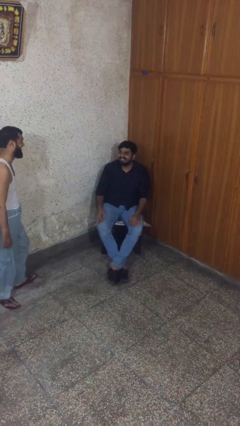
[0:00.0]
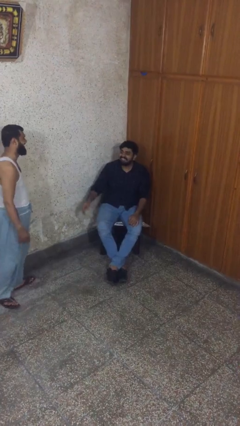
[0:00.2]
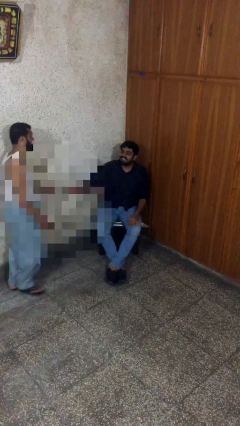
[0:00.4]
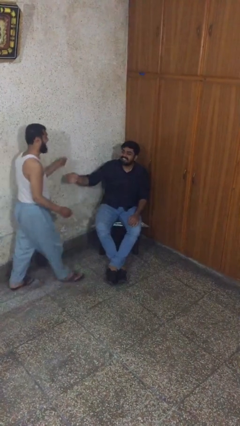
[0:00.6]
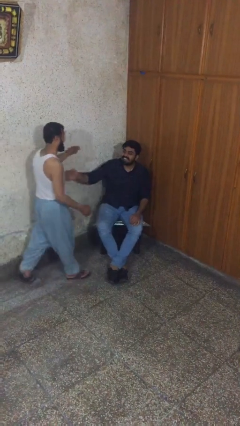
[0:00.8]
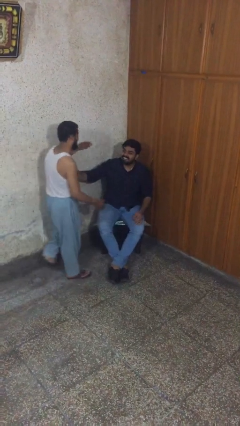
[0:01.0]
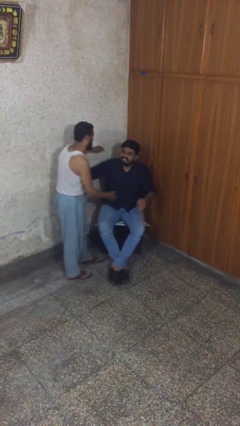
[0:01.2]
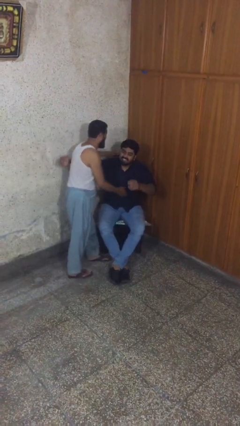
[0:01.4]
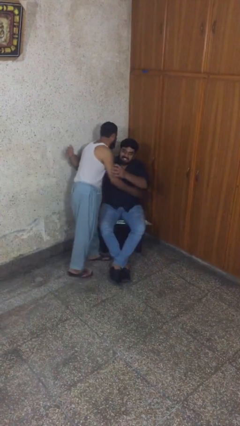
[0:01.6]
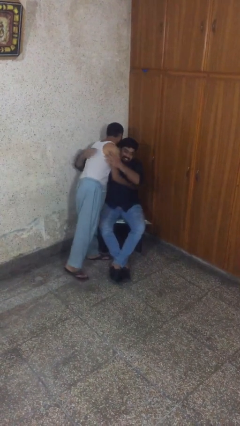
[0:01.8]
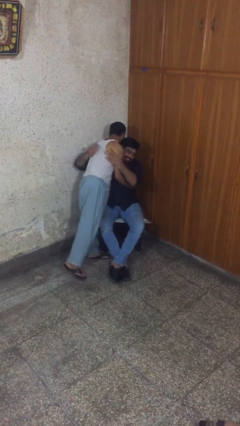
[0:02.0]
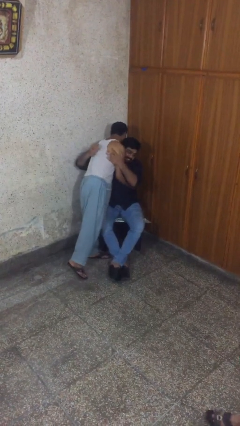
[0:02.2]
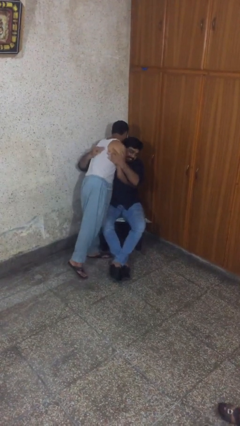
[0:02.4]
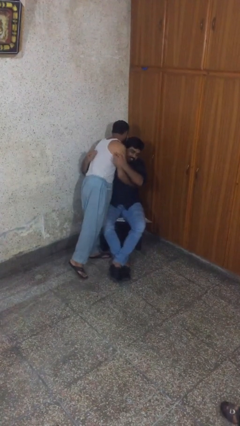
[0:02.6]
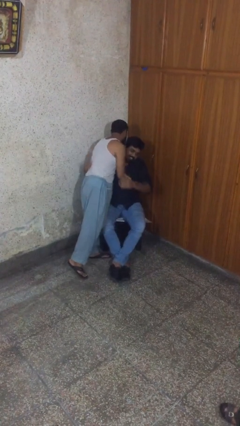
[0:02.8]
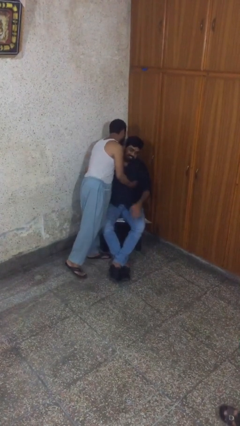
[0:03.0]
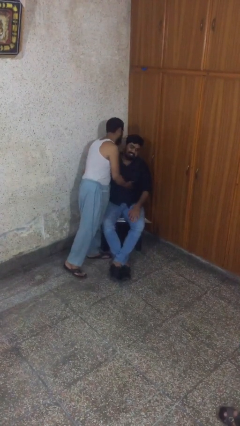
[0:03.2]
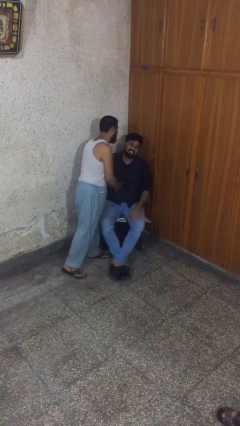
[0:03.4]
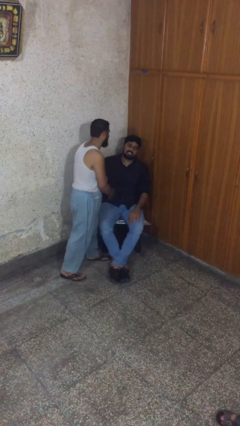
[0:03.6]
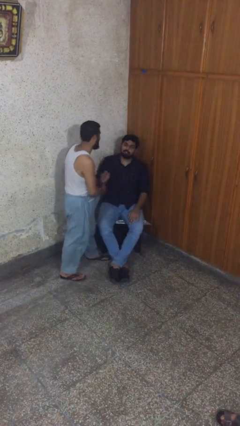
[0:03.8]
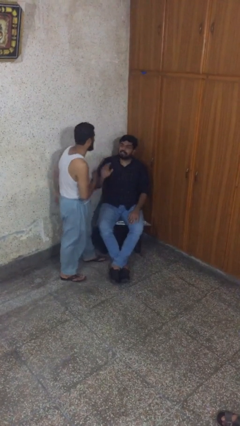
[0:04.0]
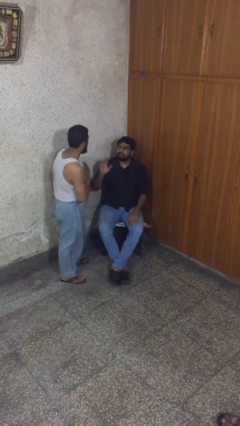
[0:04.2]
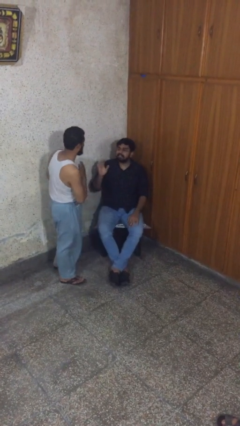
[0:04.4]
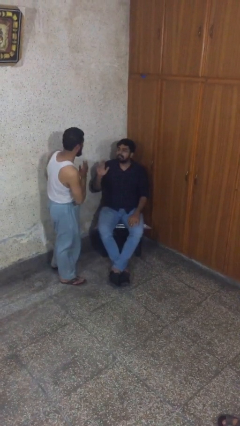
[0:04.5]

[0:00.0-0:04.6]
person embraces person

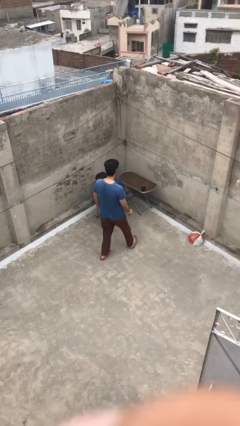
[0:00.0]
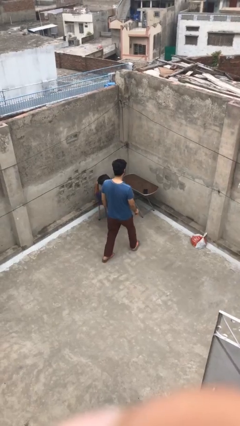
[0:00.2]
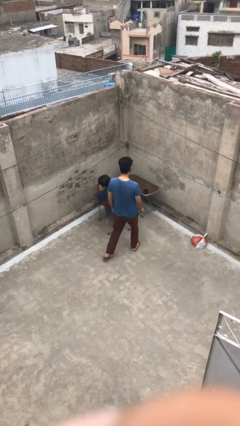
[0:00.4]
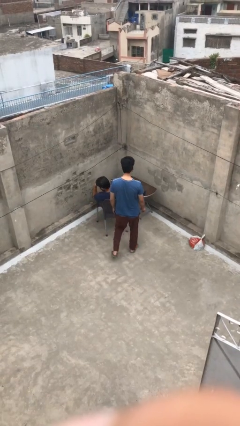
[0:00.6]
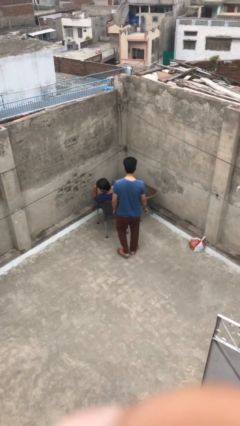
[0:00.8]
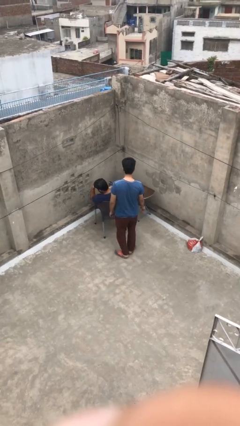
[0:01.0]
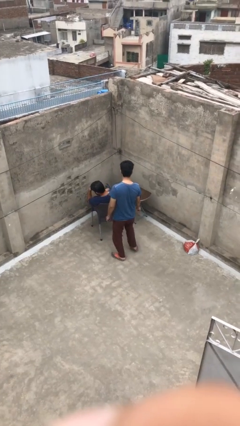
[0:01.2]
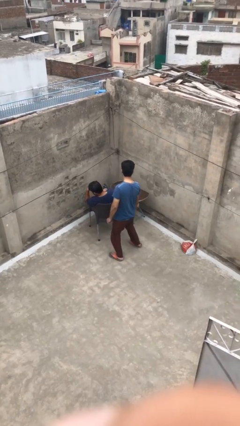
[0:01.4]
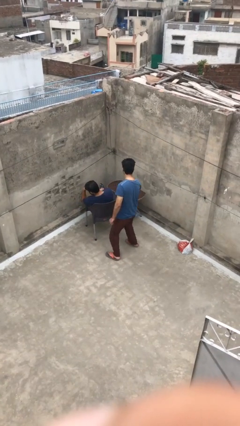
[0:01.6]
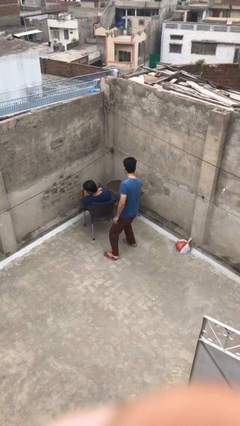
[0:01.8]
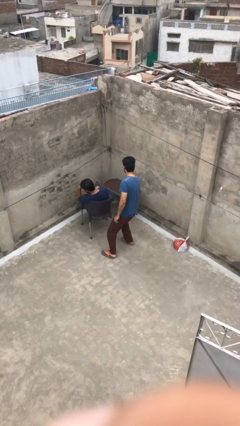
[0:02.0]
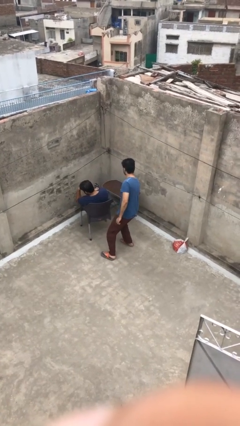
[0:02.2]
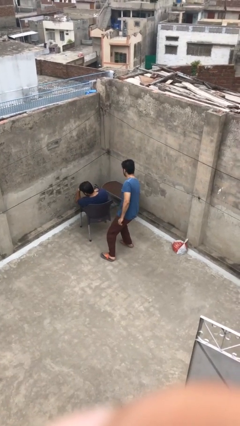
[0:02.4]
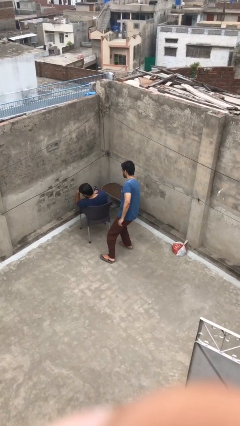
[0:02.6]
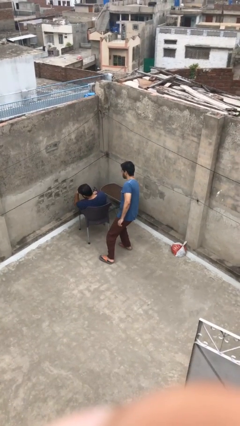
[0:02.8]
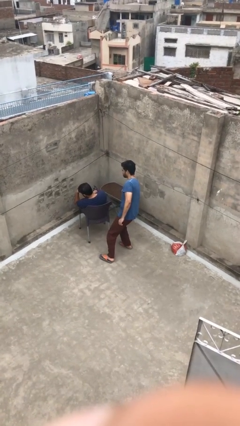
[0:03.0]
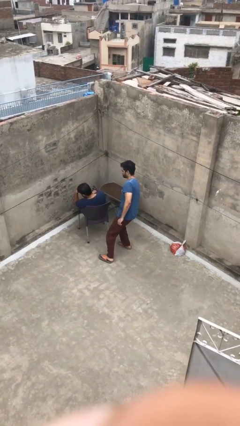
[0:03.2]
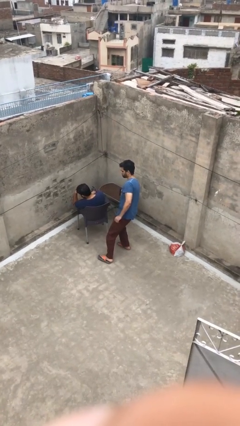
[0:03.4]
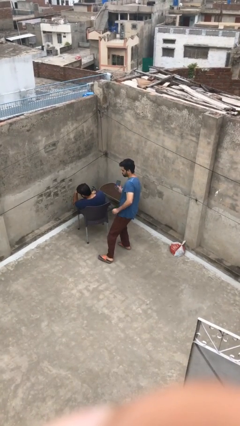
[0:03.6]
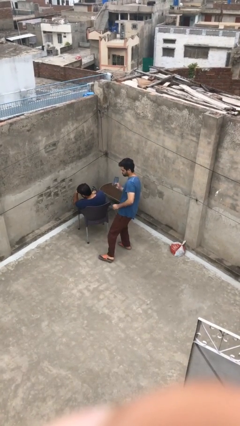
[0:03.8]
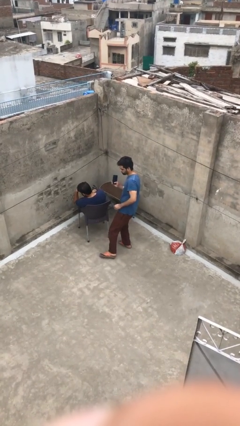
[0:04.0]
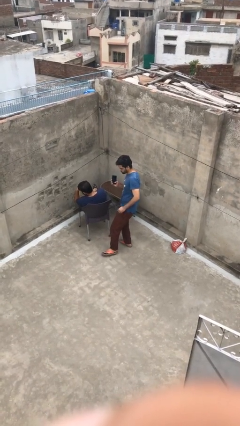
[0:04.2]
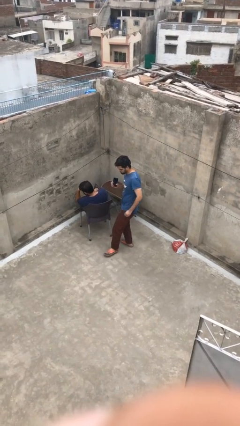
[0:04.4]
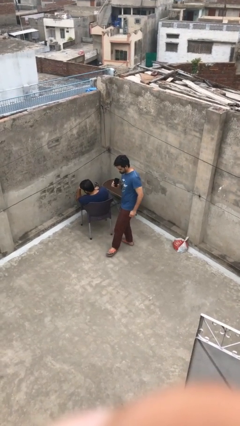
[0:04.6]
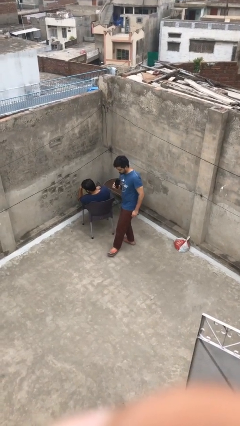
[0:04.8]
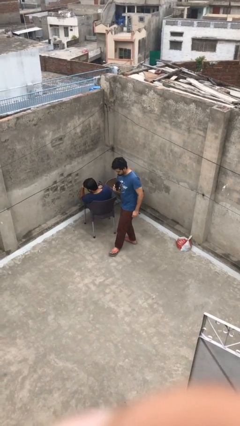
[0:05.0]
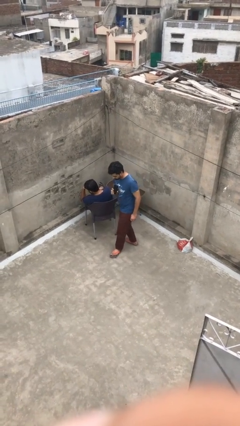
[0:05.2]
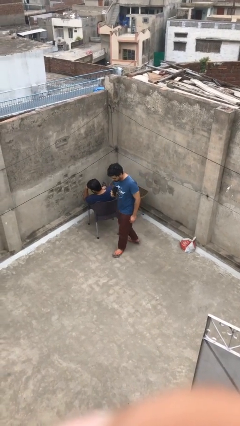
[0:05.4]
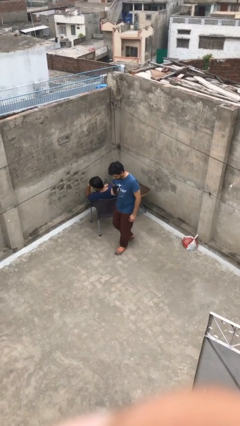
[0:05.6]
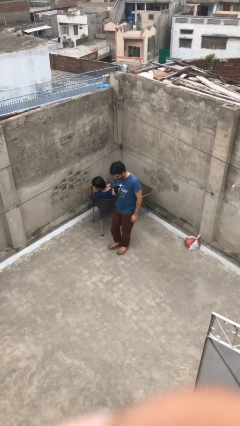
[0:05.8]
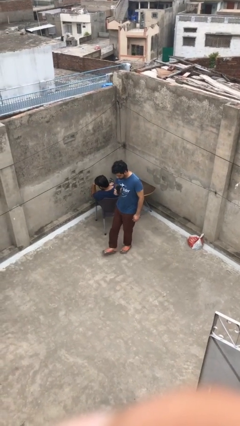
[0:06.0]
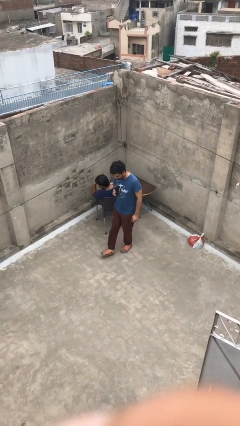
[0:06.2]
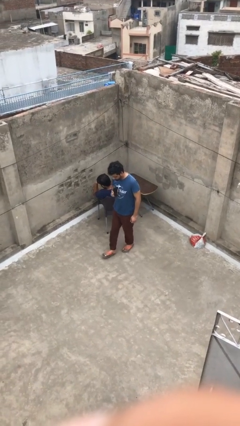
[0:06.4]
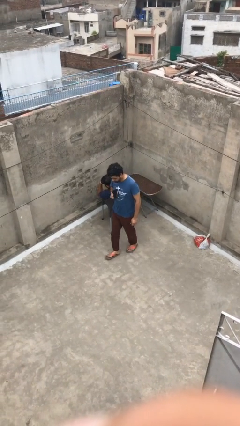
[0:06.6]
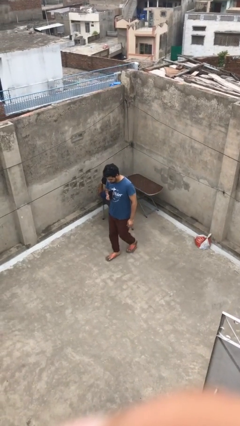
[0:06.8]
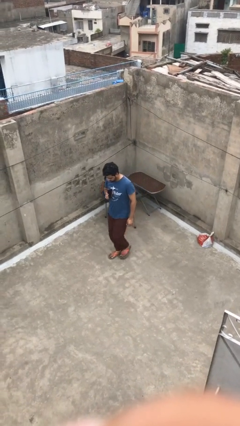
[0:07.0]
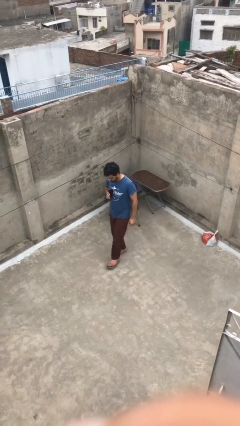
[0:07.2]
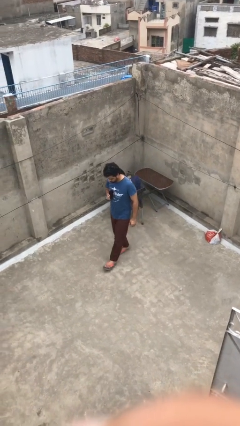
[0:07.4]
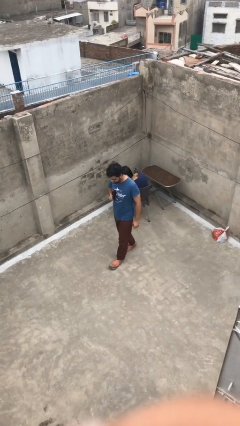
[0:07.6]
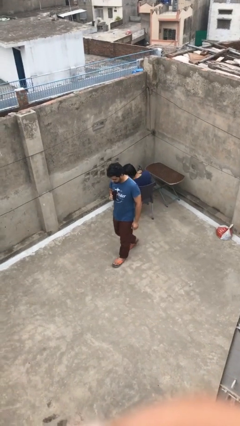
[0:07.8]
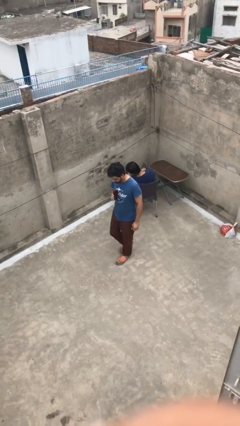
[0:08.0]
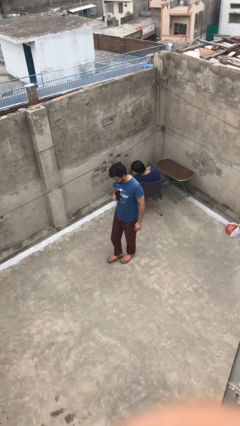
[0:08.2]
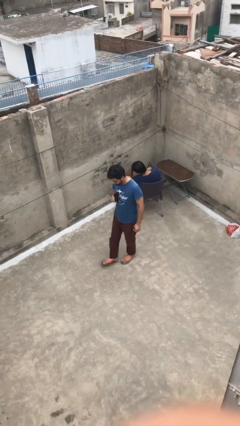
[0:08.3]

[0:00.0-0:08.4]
person steals object from person

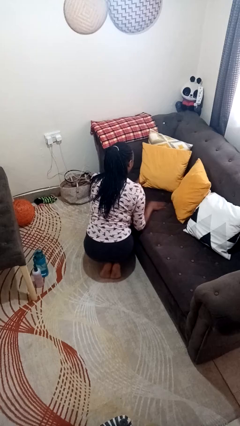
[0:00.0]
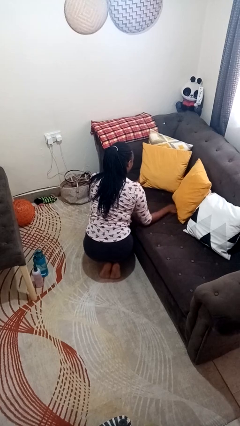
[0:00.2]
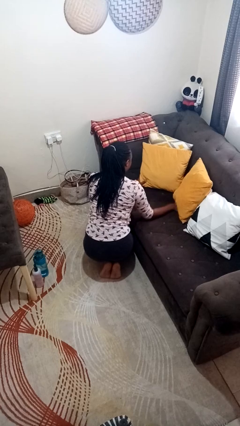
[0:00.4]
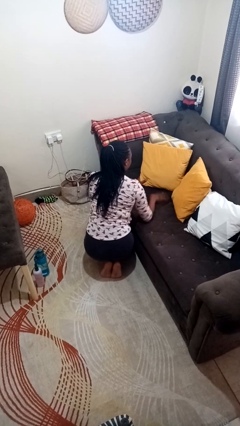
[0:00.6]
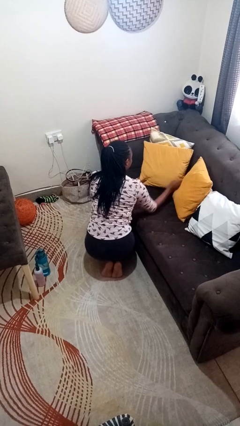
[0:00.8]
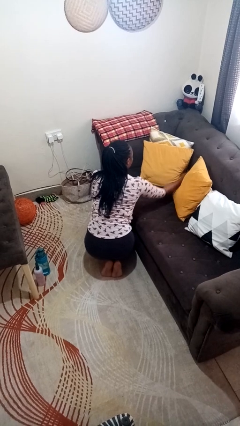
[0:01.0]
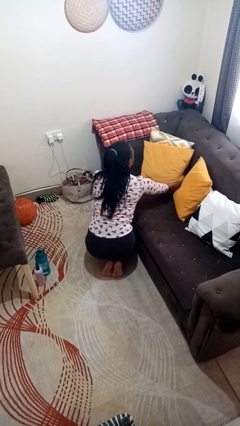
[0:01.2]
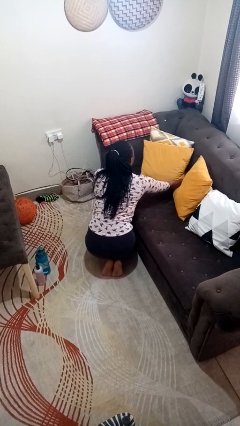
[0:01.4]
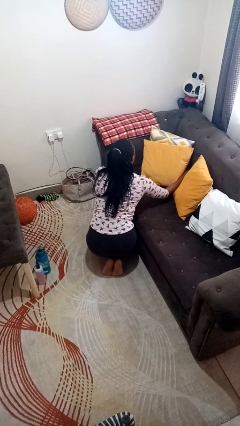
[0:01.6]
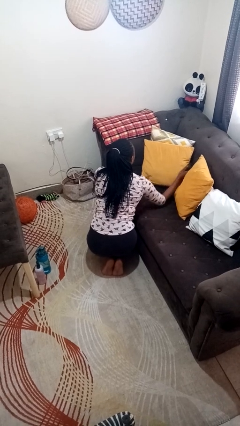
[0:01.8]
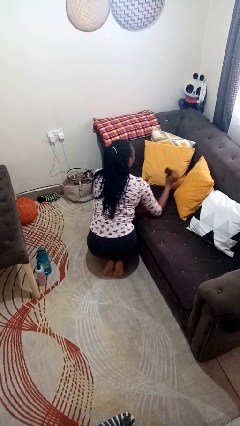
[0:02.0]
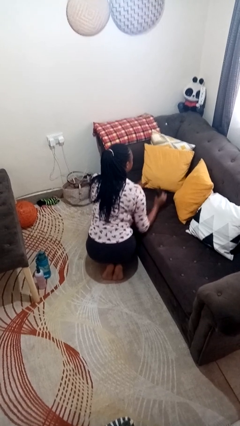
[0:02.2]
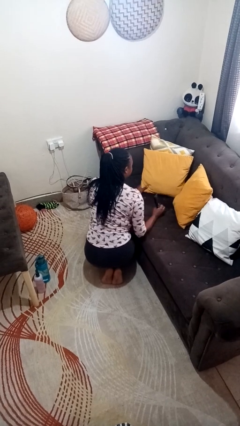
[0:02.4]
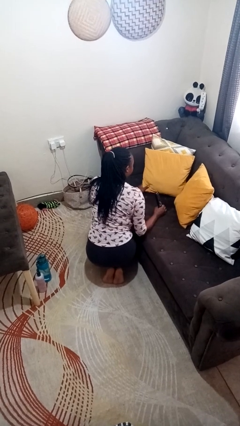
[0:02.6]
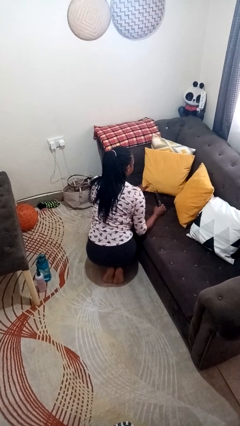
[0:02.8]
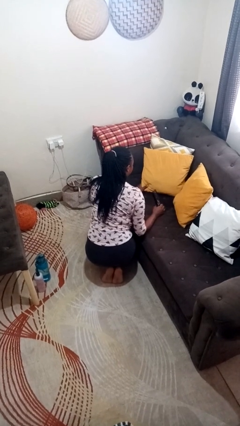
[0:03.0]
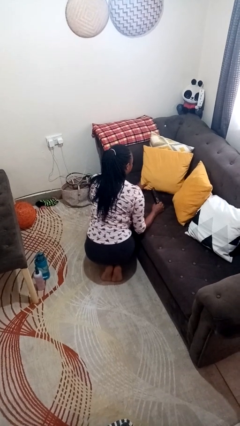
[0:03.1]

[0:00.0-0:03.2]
person searches in couch

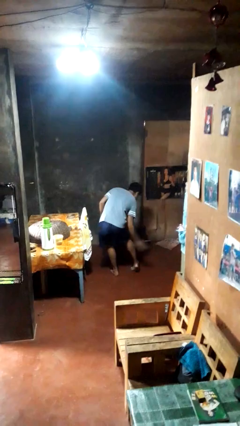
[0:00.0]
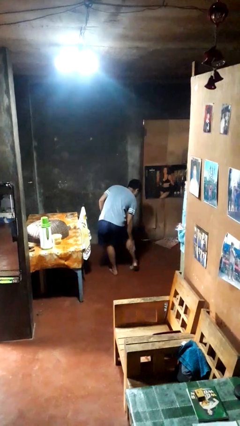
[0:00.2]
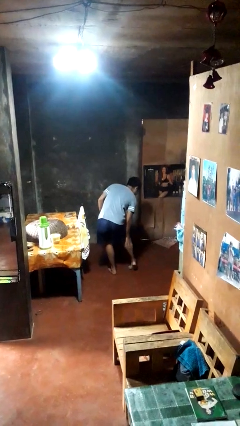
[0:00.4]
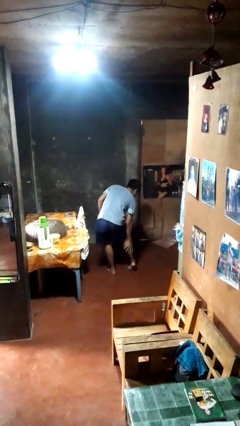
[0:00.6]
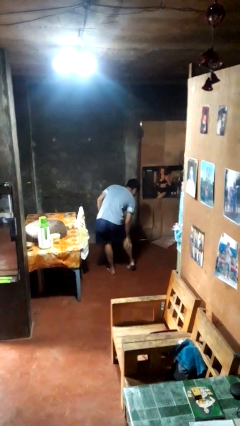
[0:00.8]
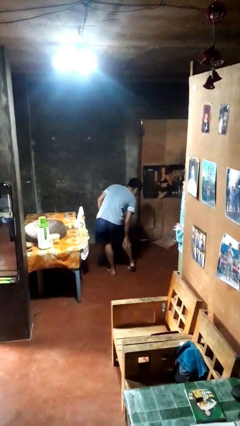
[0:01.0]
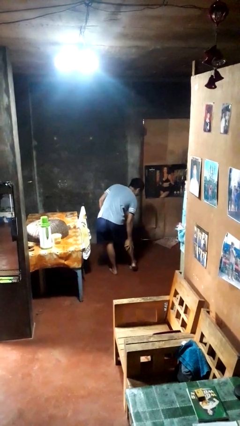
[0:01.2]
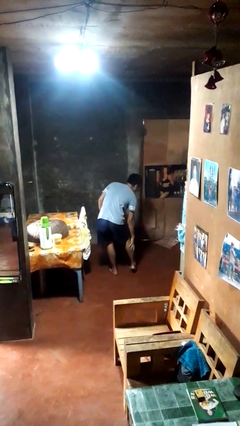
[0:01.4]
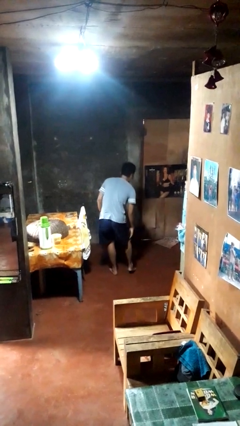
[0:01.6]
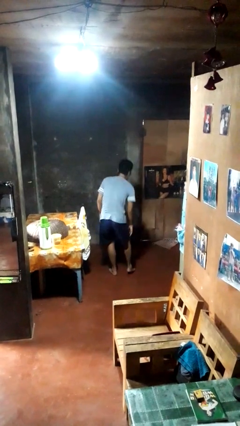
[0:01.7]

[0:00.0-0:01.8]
person swats bug
